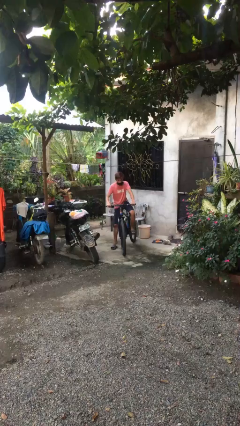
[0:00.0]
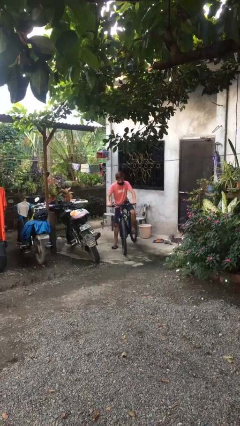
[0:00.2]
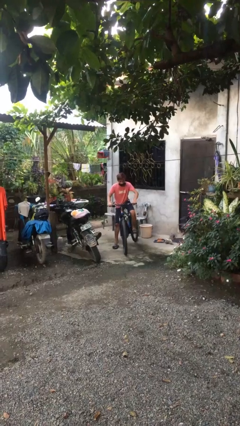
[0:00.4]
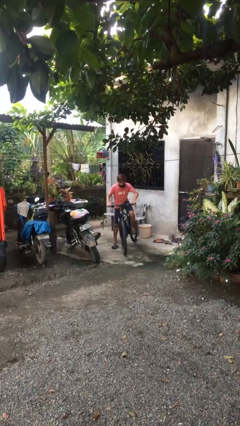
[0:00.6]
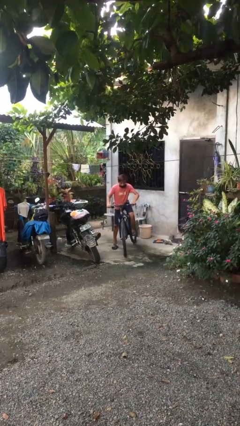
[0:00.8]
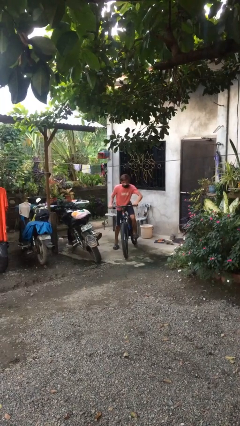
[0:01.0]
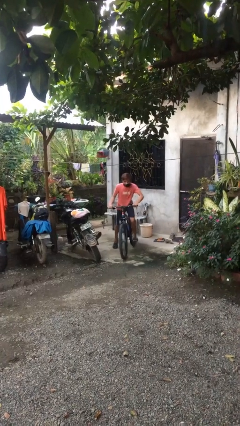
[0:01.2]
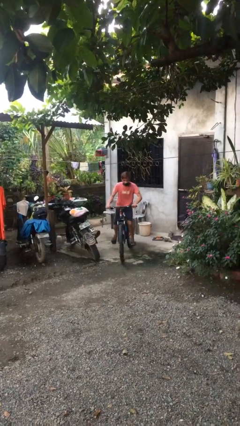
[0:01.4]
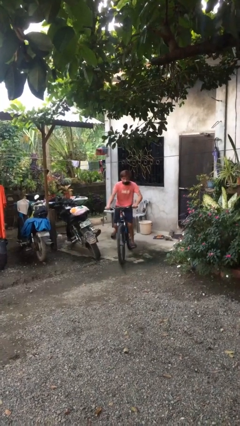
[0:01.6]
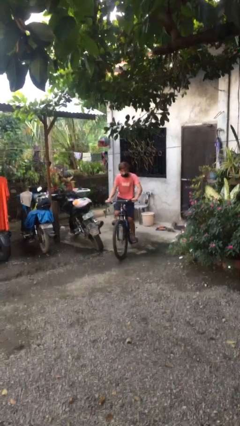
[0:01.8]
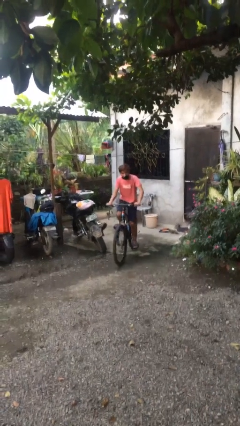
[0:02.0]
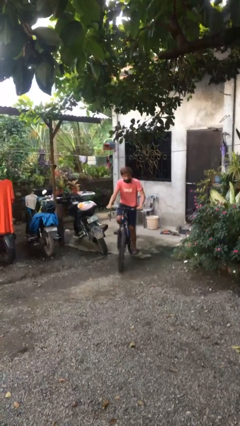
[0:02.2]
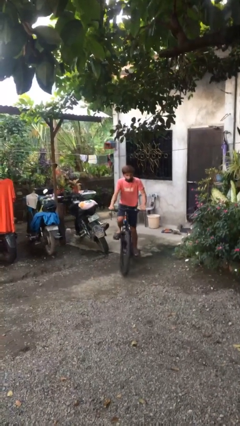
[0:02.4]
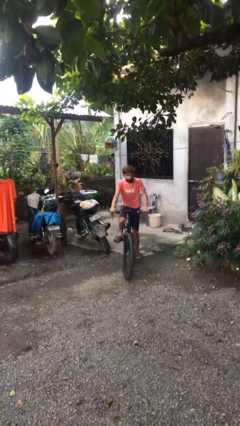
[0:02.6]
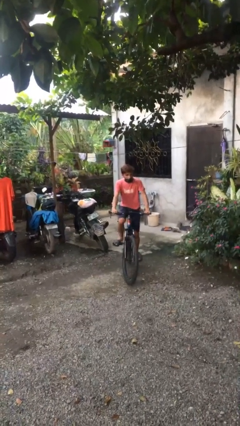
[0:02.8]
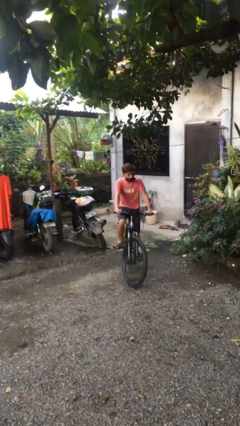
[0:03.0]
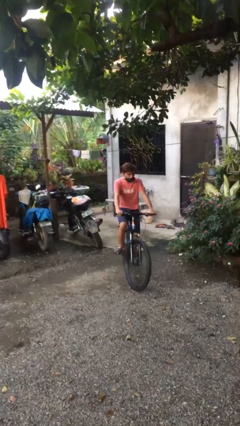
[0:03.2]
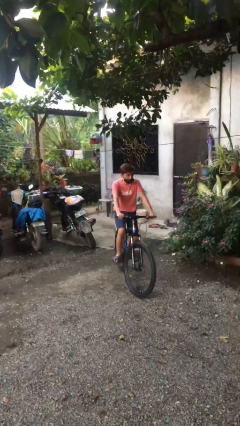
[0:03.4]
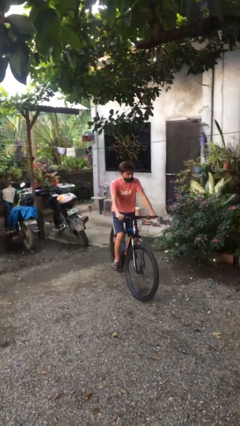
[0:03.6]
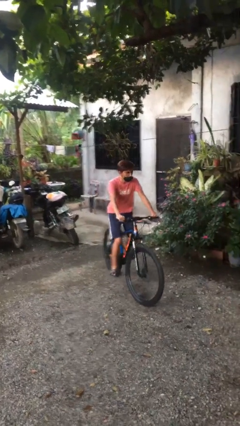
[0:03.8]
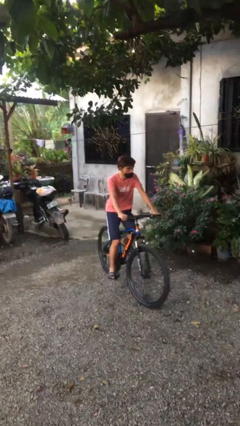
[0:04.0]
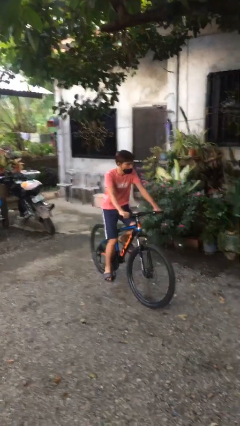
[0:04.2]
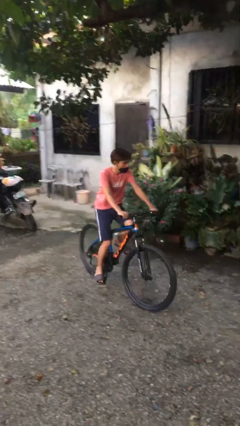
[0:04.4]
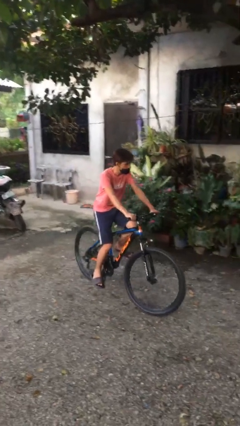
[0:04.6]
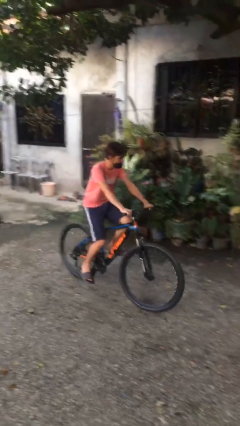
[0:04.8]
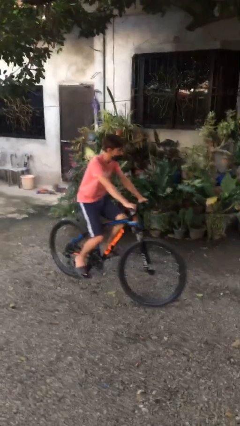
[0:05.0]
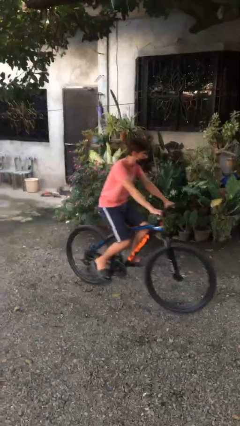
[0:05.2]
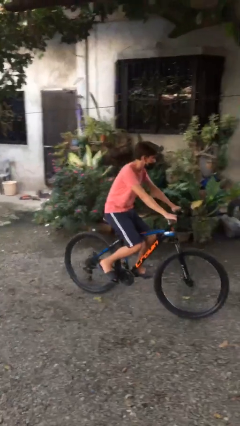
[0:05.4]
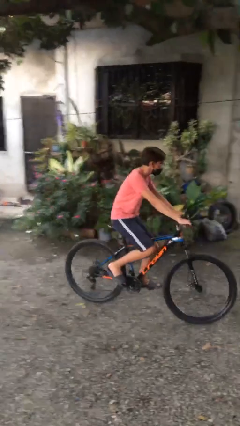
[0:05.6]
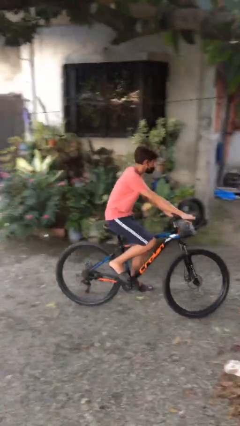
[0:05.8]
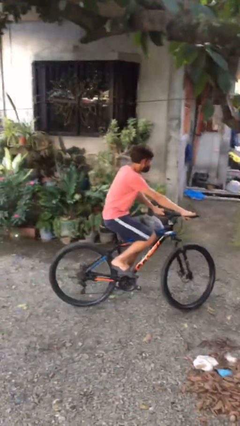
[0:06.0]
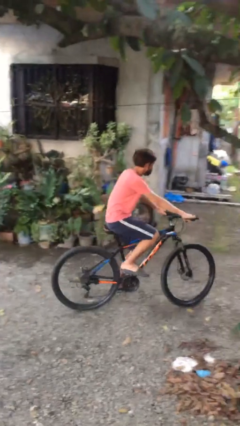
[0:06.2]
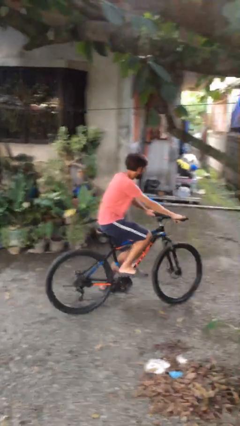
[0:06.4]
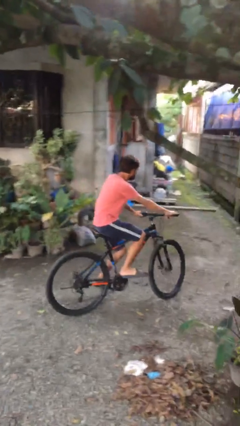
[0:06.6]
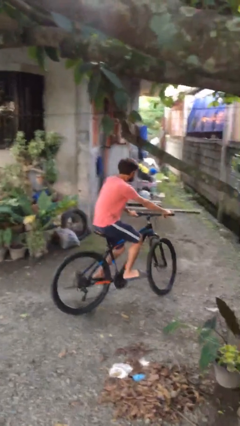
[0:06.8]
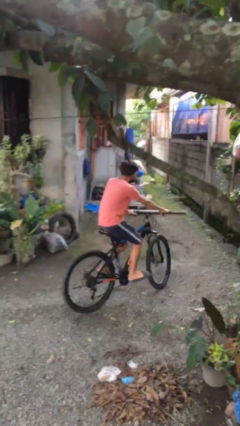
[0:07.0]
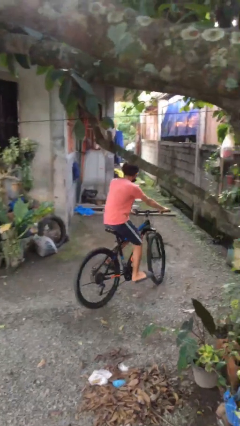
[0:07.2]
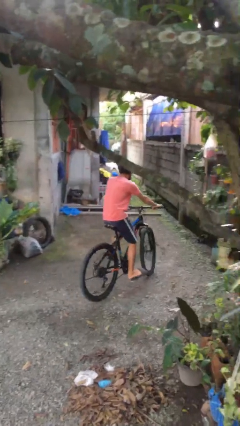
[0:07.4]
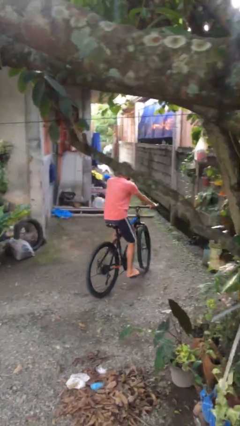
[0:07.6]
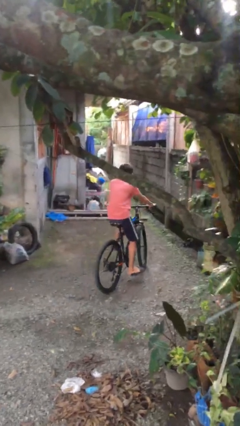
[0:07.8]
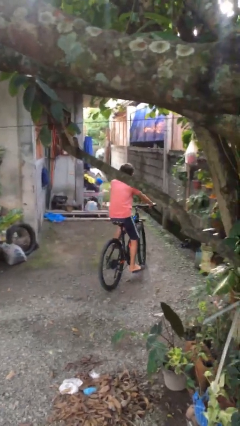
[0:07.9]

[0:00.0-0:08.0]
person rides bicycle

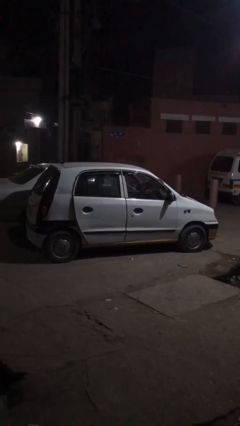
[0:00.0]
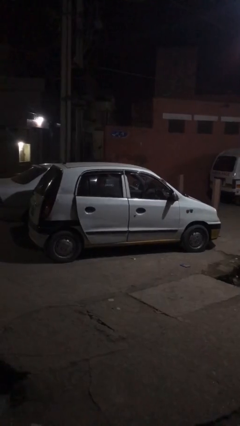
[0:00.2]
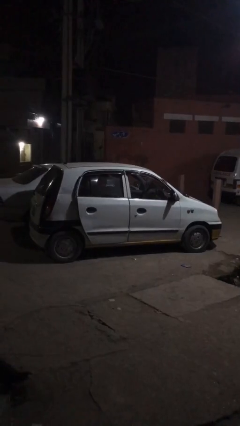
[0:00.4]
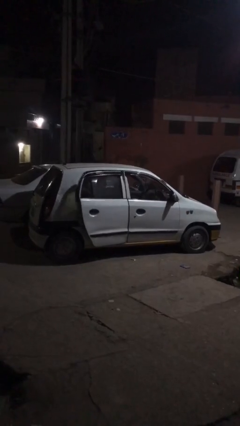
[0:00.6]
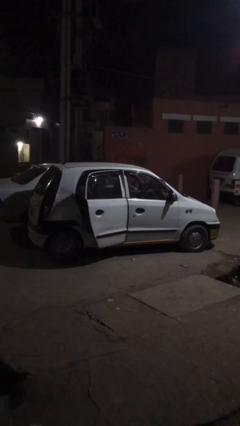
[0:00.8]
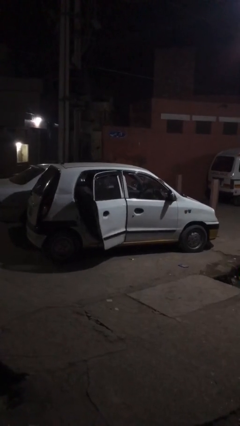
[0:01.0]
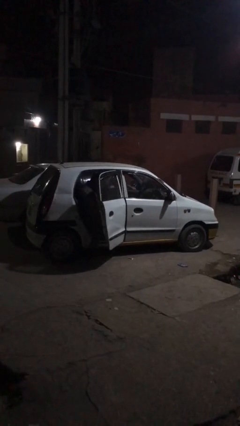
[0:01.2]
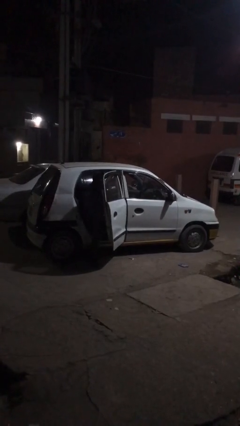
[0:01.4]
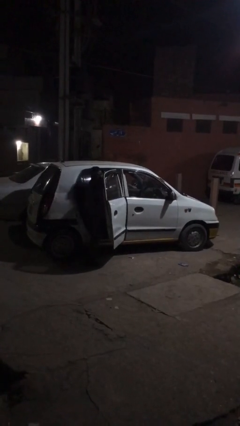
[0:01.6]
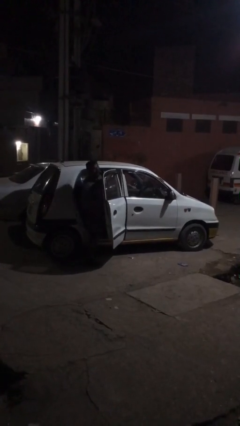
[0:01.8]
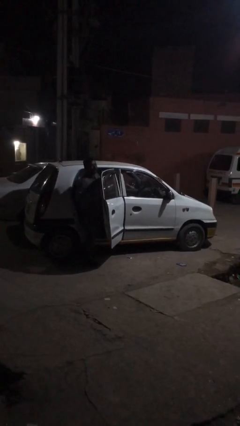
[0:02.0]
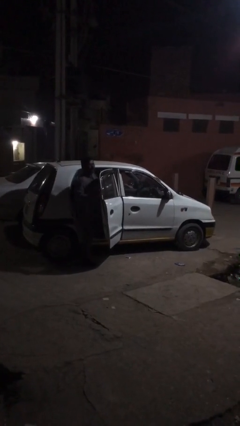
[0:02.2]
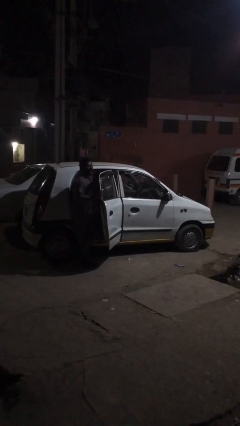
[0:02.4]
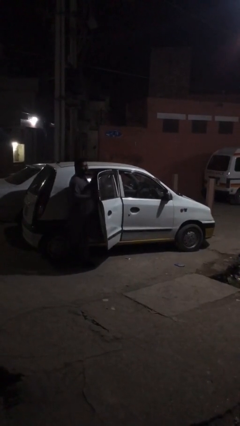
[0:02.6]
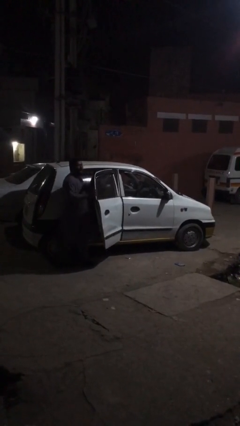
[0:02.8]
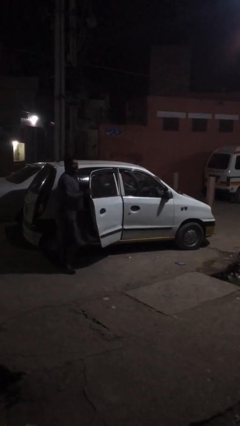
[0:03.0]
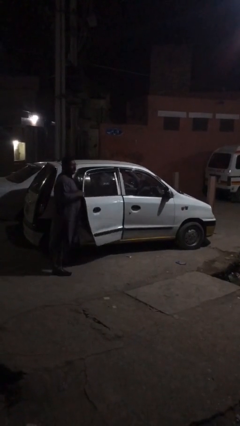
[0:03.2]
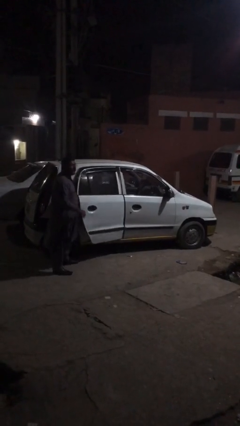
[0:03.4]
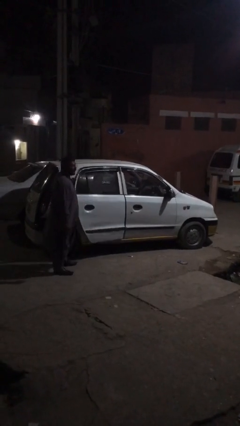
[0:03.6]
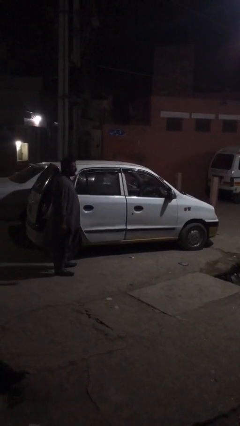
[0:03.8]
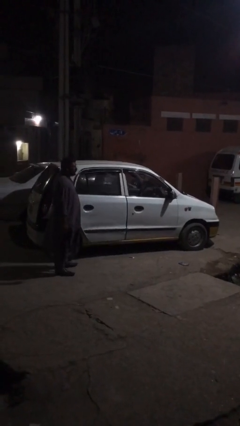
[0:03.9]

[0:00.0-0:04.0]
car drops off person

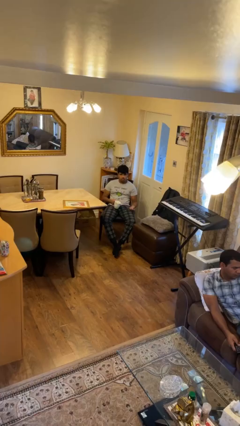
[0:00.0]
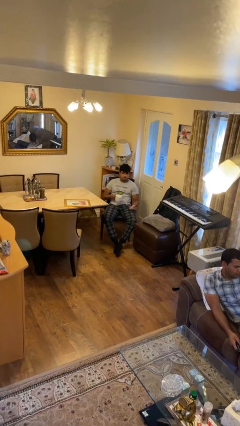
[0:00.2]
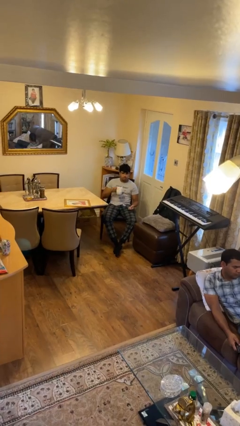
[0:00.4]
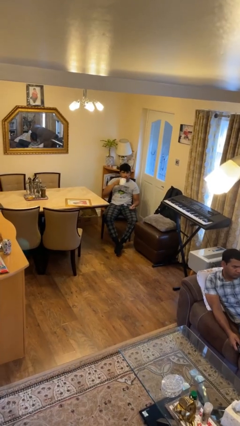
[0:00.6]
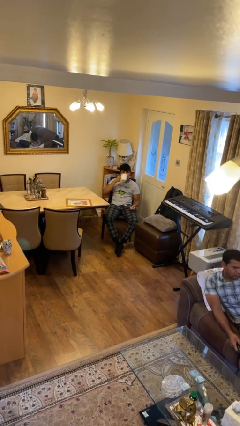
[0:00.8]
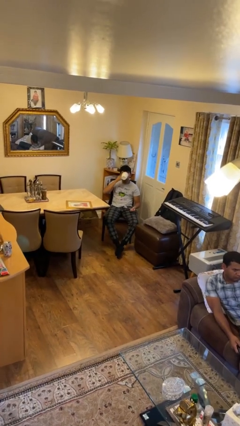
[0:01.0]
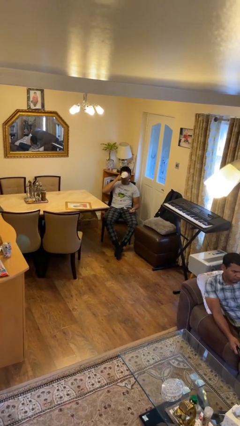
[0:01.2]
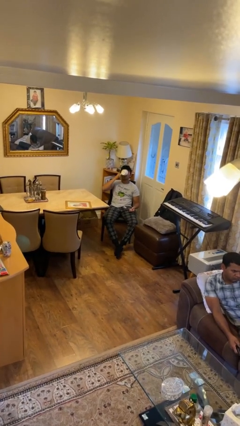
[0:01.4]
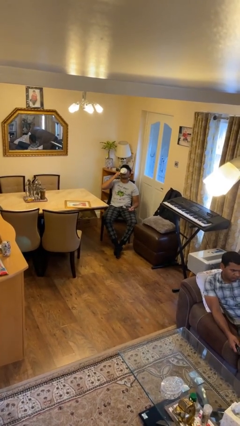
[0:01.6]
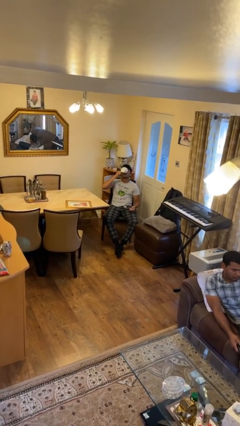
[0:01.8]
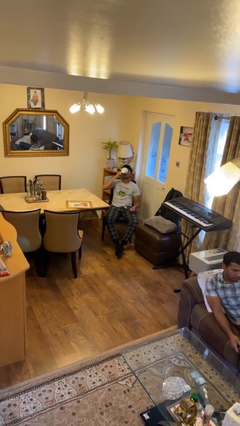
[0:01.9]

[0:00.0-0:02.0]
person drinks from mug

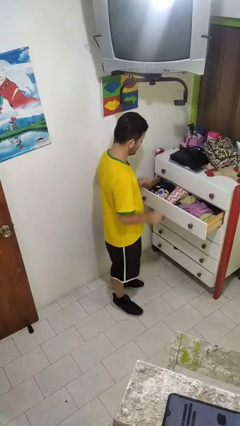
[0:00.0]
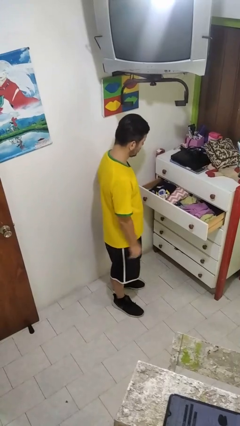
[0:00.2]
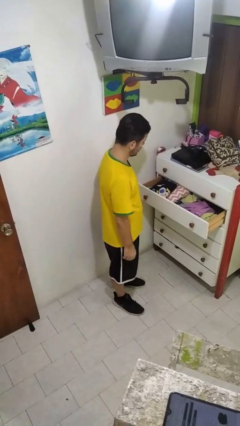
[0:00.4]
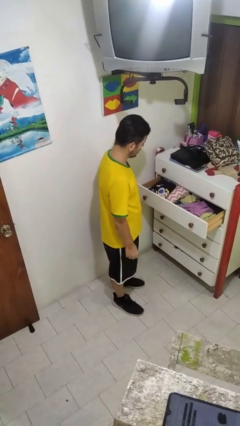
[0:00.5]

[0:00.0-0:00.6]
person puts clothes into dresser

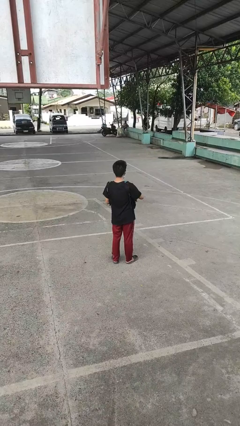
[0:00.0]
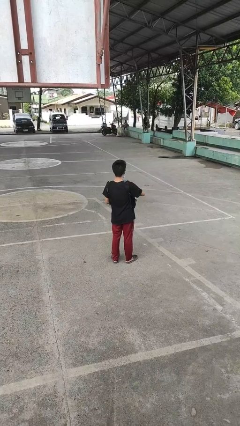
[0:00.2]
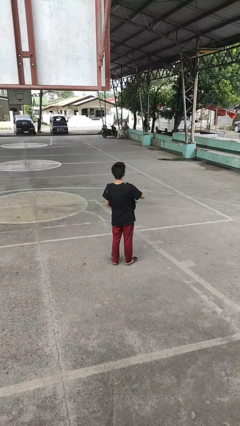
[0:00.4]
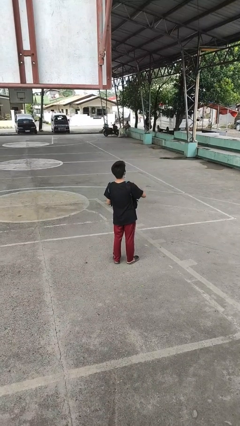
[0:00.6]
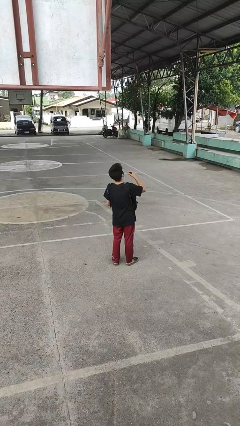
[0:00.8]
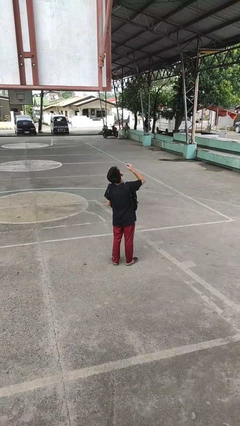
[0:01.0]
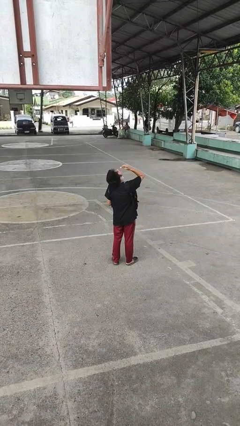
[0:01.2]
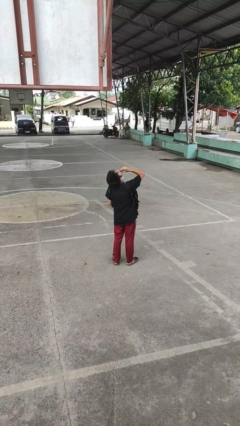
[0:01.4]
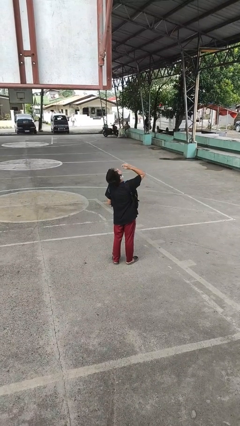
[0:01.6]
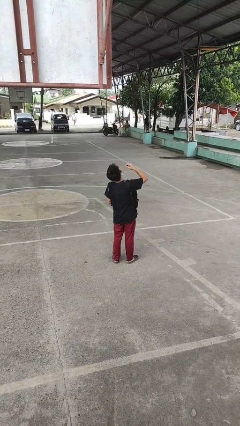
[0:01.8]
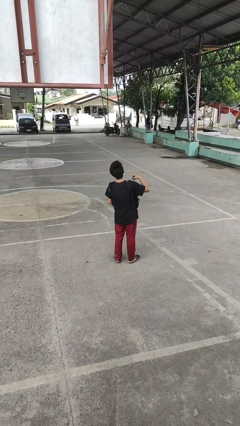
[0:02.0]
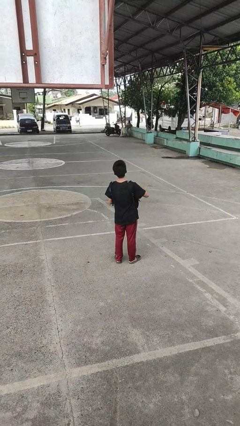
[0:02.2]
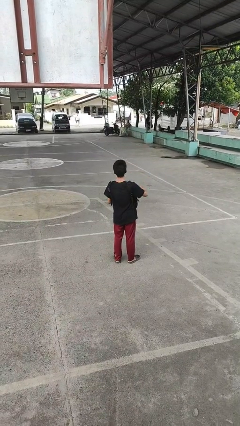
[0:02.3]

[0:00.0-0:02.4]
person eats snack from bag

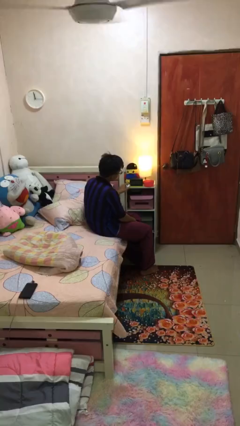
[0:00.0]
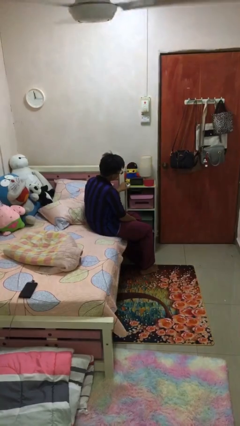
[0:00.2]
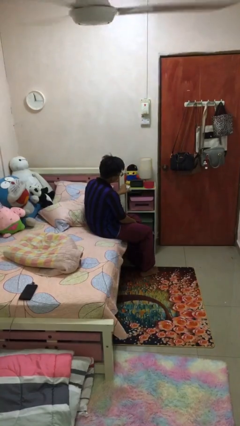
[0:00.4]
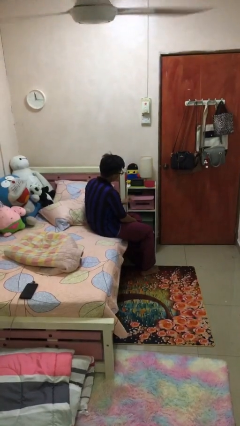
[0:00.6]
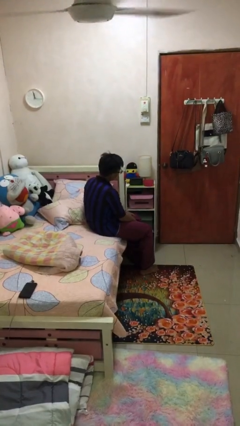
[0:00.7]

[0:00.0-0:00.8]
person turns off lamp
